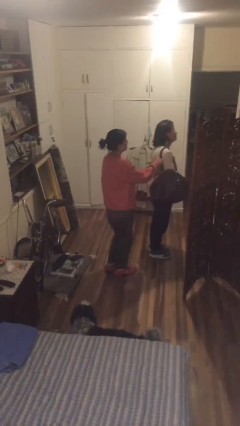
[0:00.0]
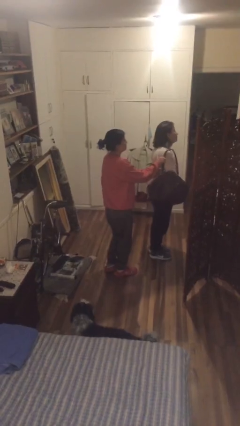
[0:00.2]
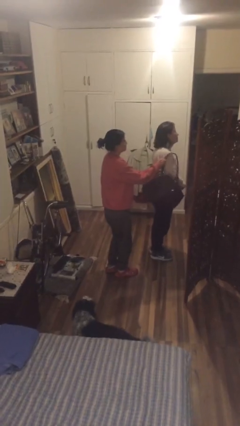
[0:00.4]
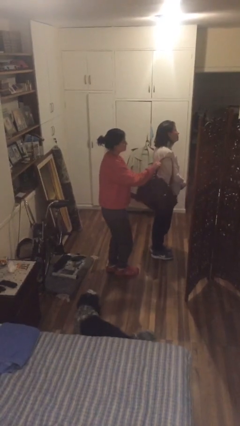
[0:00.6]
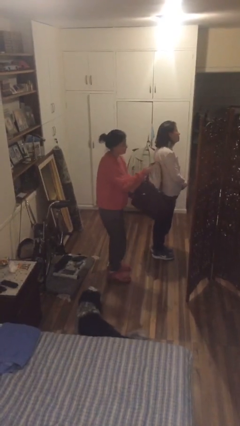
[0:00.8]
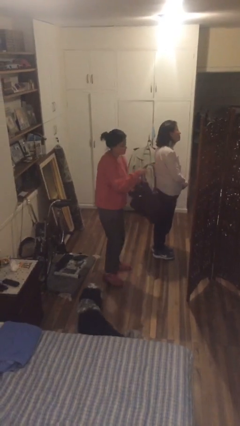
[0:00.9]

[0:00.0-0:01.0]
person steals object from person

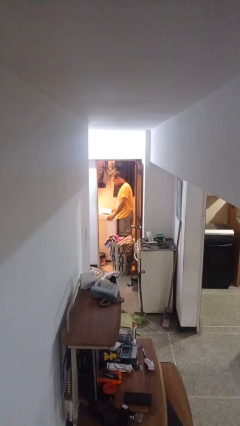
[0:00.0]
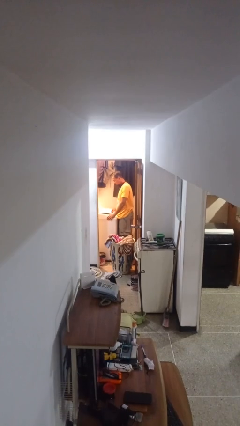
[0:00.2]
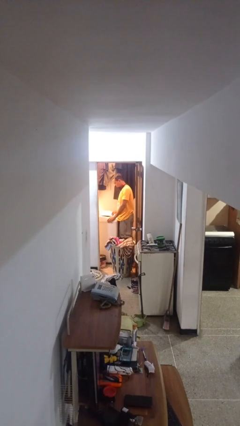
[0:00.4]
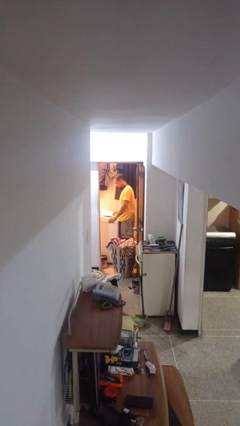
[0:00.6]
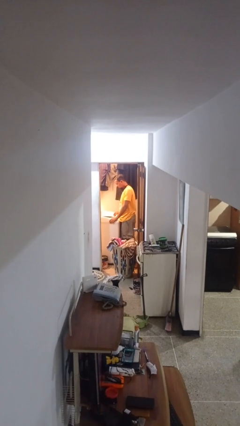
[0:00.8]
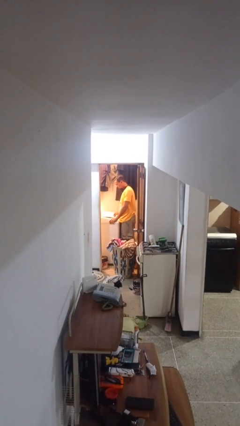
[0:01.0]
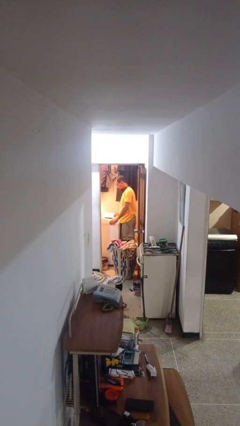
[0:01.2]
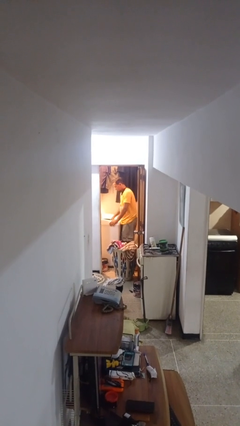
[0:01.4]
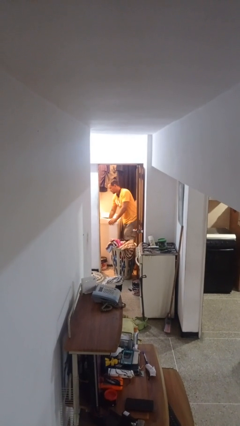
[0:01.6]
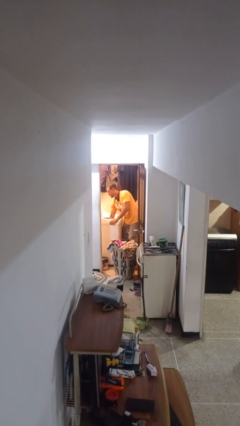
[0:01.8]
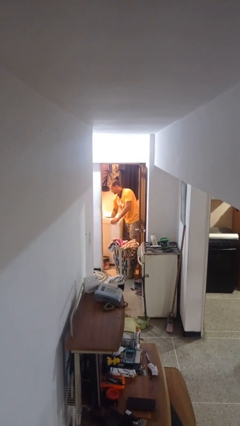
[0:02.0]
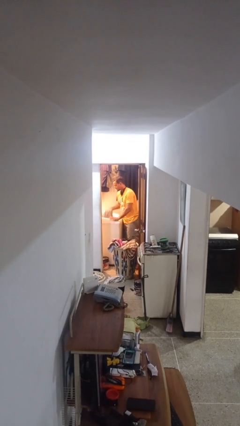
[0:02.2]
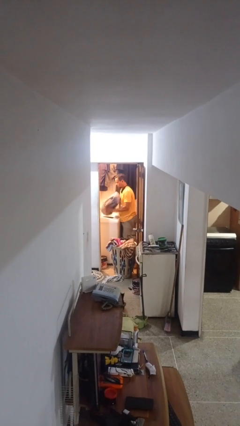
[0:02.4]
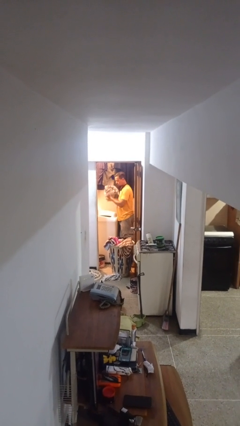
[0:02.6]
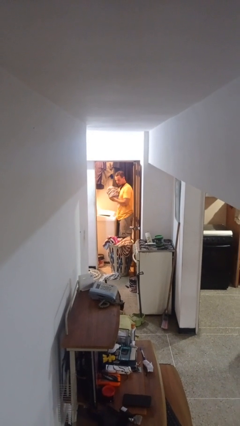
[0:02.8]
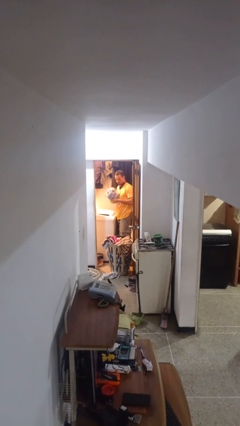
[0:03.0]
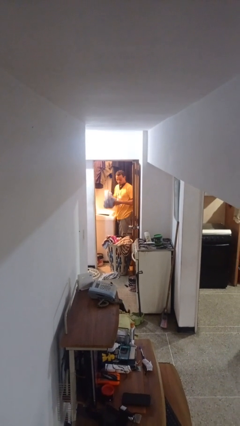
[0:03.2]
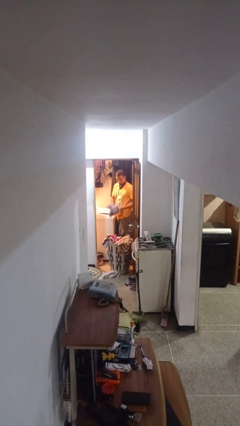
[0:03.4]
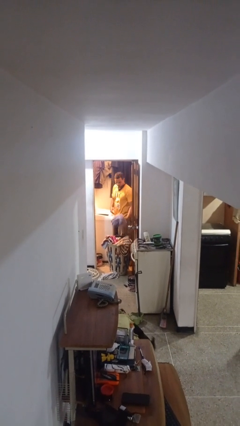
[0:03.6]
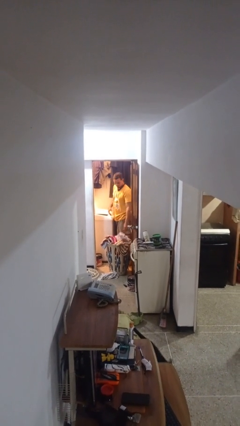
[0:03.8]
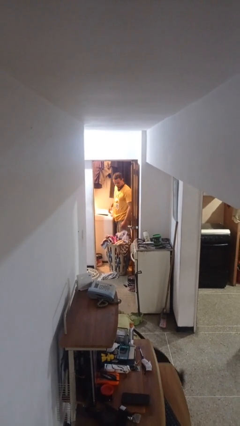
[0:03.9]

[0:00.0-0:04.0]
person loads clotheswasher

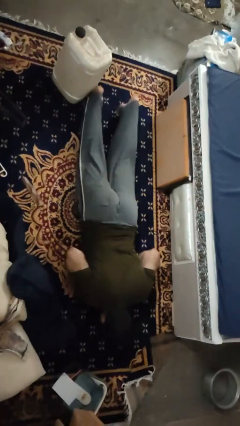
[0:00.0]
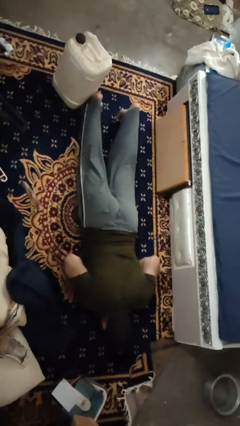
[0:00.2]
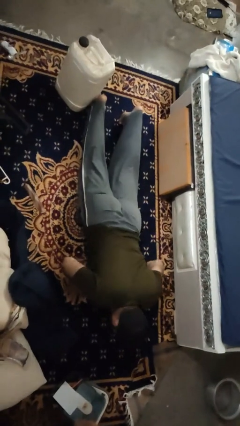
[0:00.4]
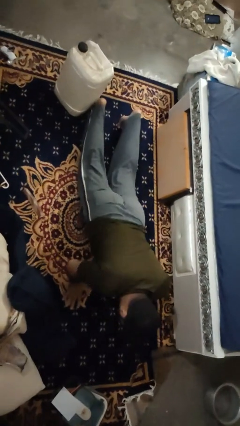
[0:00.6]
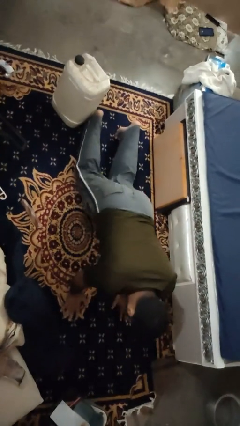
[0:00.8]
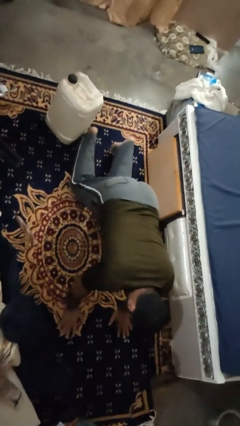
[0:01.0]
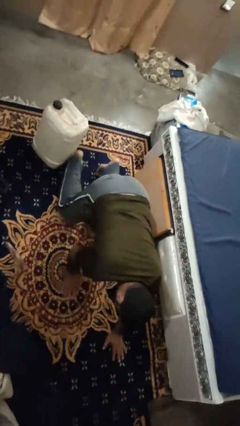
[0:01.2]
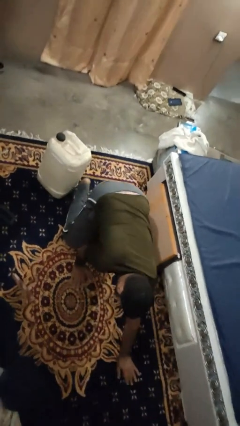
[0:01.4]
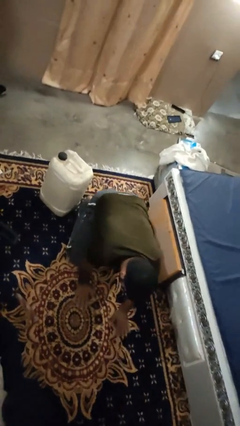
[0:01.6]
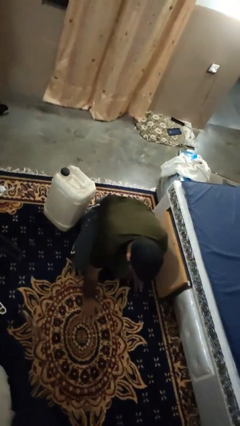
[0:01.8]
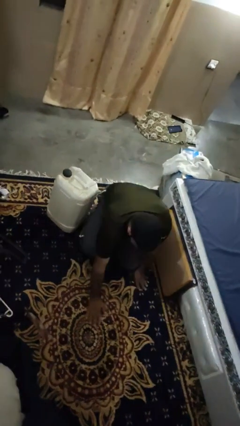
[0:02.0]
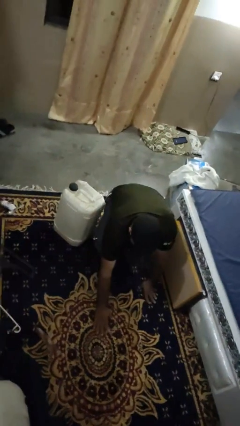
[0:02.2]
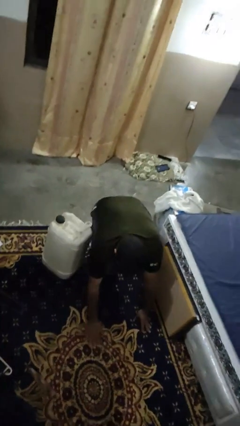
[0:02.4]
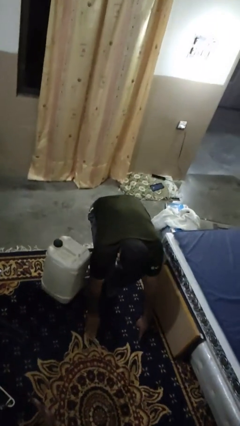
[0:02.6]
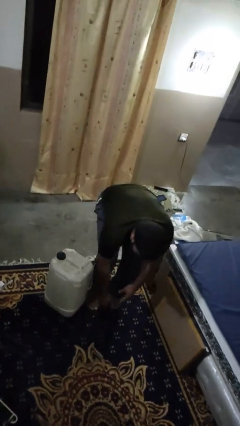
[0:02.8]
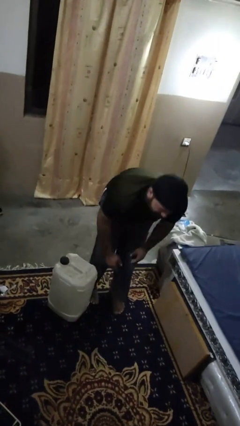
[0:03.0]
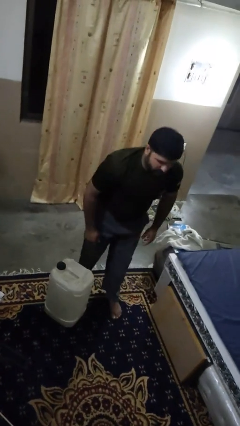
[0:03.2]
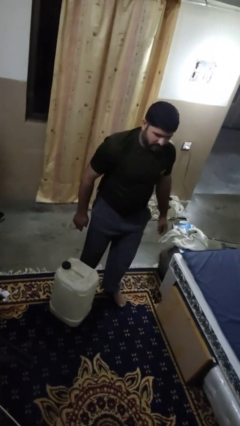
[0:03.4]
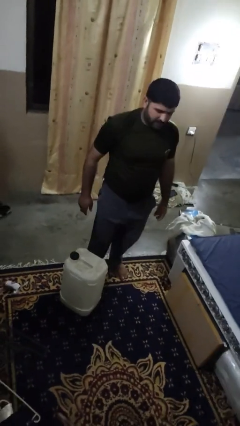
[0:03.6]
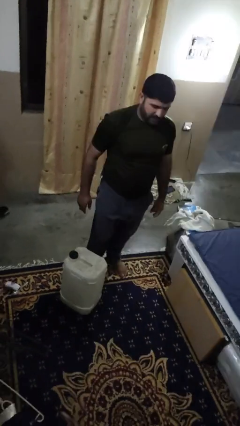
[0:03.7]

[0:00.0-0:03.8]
person stands up from floor

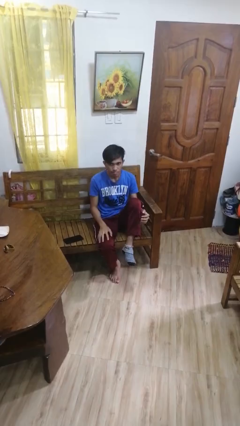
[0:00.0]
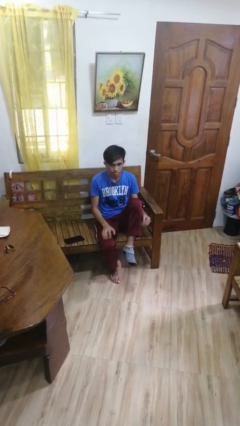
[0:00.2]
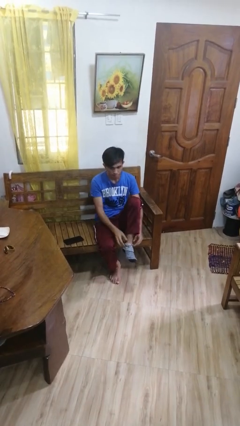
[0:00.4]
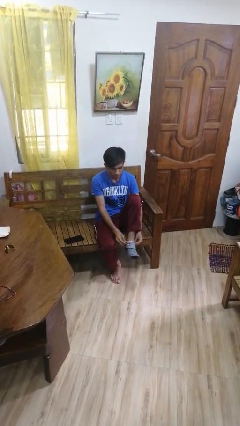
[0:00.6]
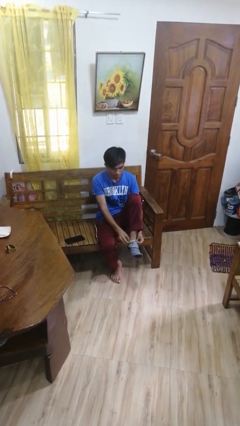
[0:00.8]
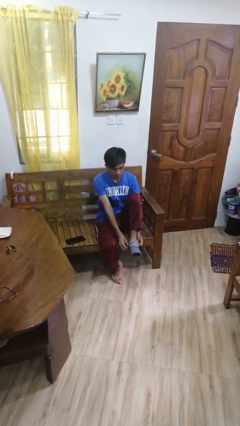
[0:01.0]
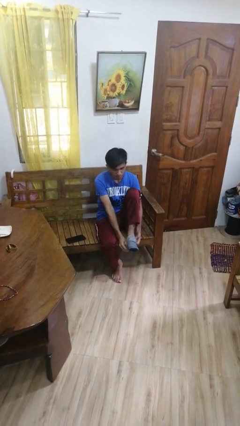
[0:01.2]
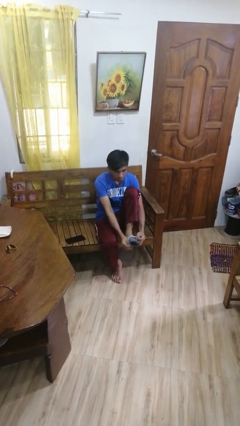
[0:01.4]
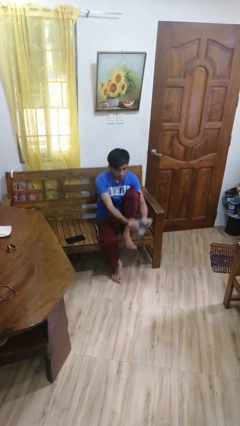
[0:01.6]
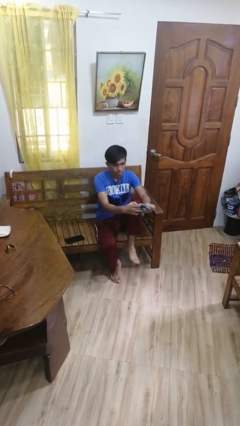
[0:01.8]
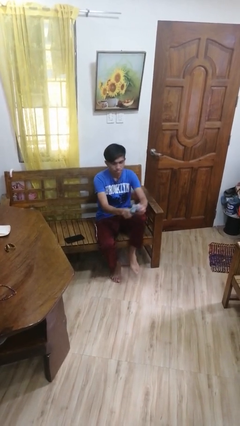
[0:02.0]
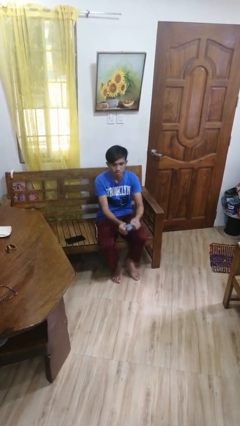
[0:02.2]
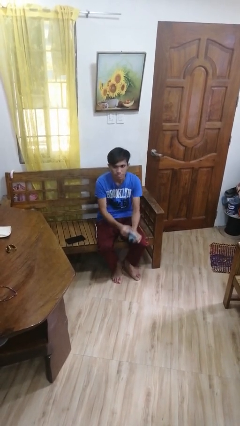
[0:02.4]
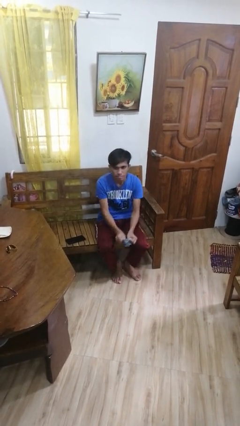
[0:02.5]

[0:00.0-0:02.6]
person takes off socks

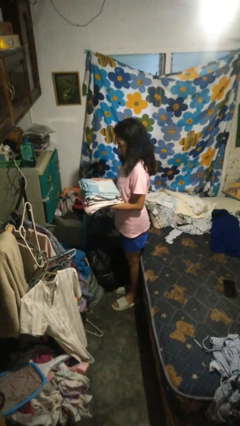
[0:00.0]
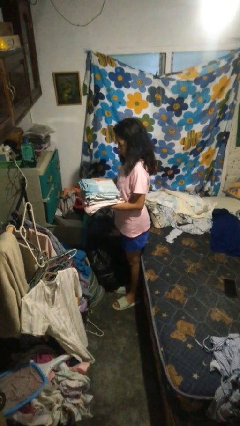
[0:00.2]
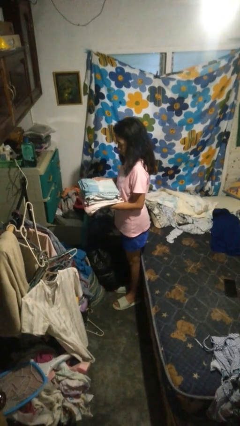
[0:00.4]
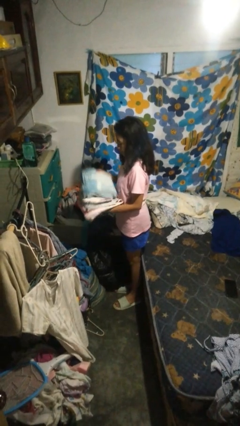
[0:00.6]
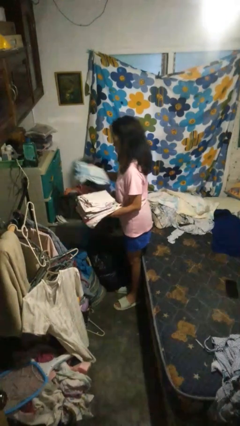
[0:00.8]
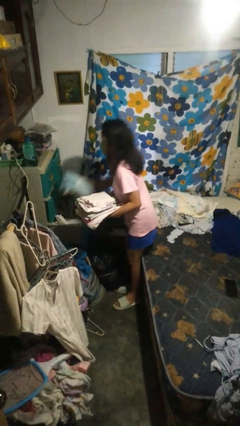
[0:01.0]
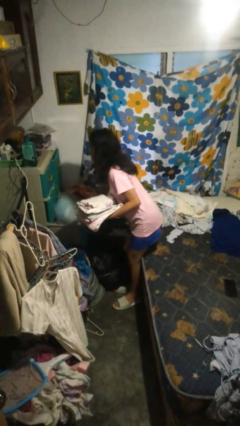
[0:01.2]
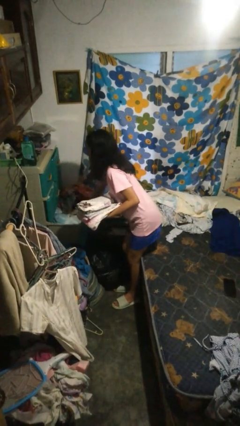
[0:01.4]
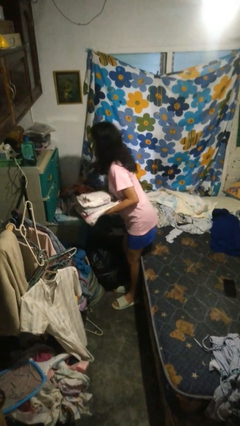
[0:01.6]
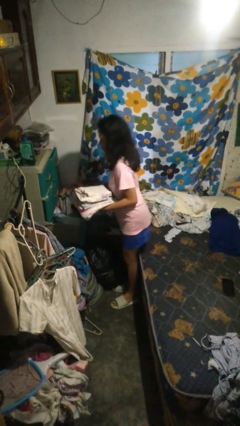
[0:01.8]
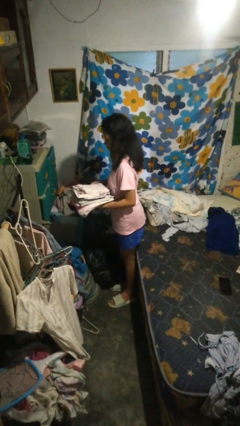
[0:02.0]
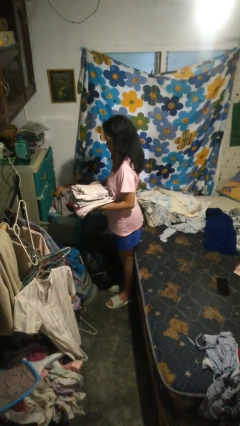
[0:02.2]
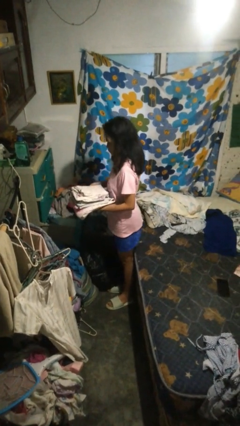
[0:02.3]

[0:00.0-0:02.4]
person puts clothes into dresser

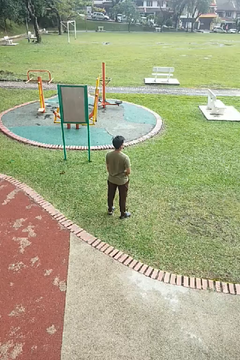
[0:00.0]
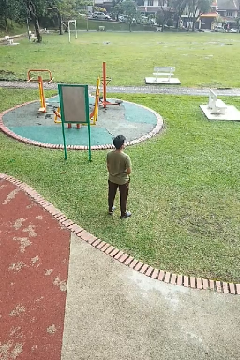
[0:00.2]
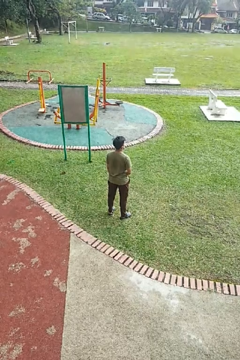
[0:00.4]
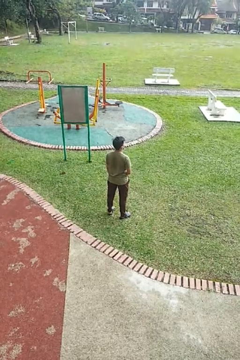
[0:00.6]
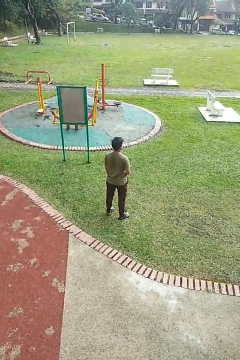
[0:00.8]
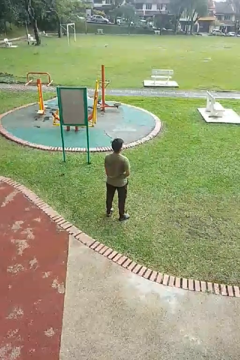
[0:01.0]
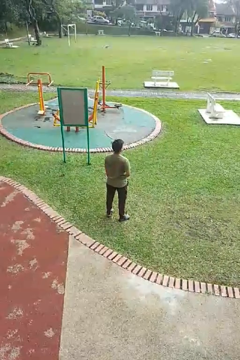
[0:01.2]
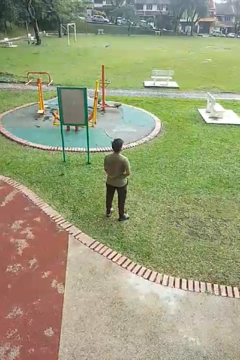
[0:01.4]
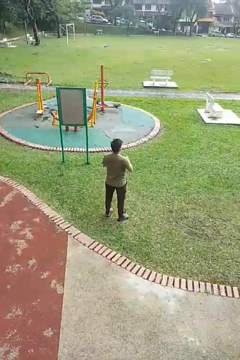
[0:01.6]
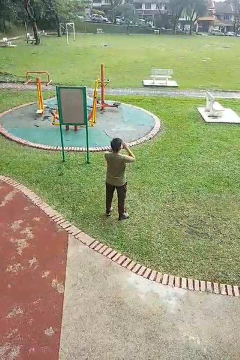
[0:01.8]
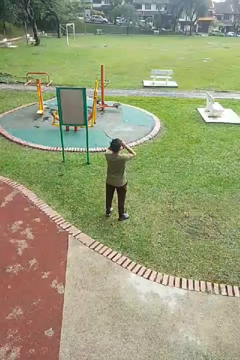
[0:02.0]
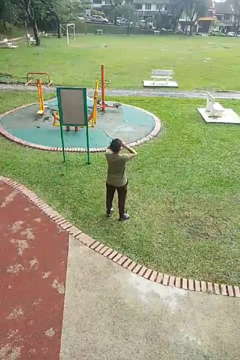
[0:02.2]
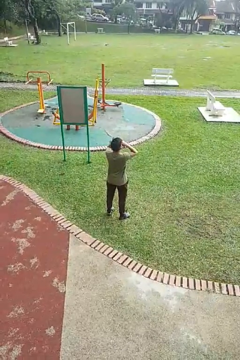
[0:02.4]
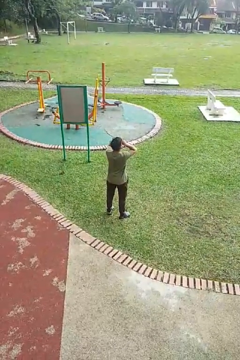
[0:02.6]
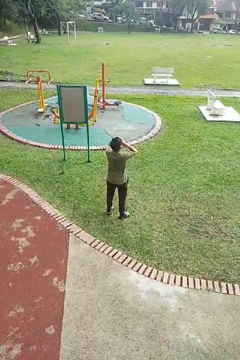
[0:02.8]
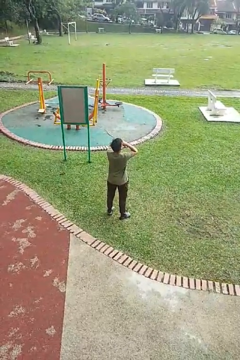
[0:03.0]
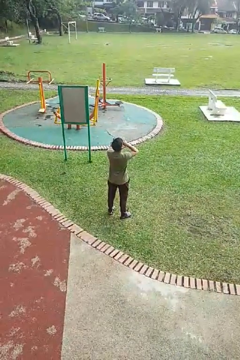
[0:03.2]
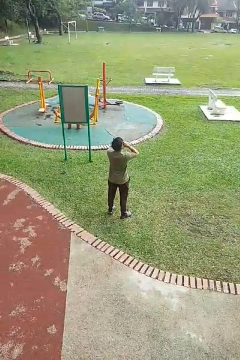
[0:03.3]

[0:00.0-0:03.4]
person rubs eyes

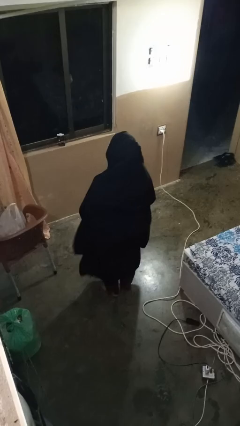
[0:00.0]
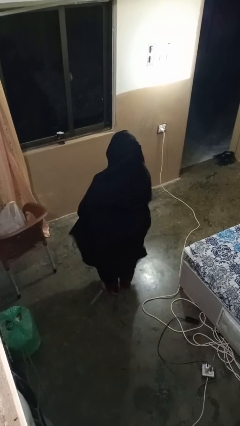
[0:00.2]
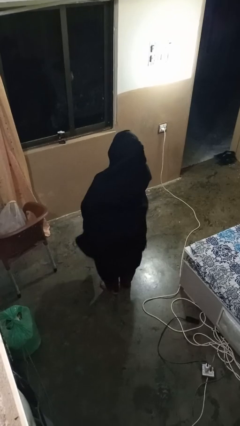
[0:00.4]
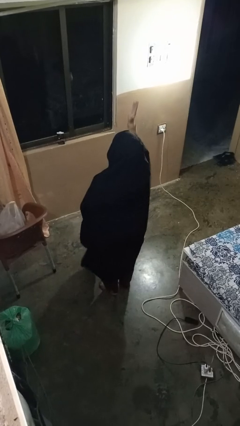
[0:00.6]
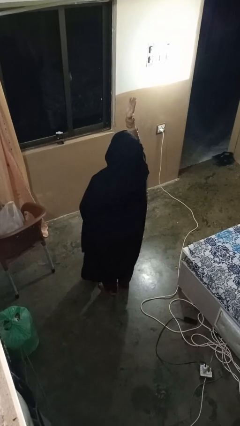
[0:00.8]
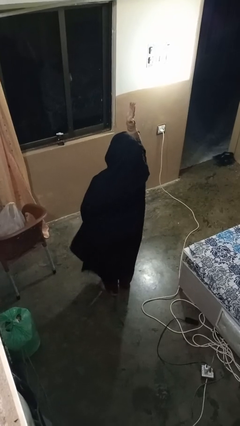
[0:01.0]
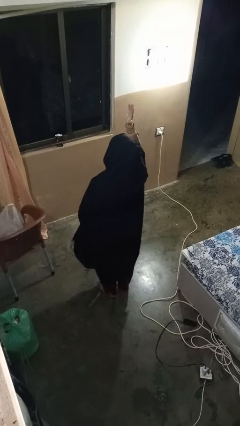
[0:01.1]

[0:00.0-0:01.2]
person gestures raise hand
